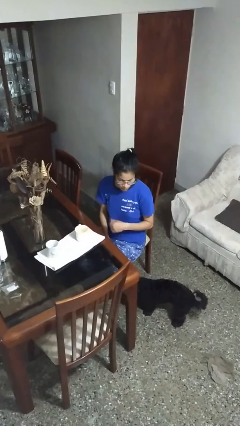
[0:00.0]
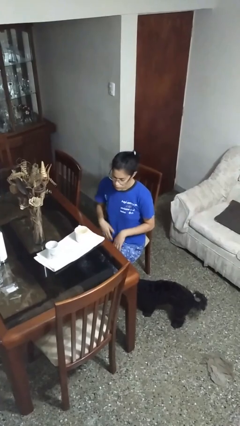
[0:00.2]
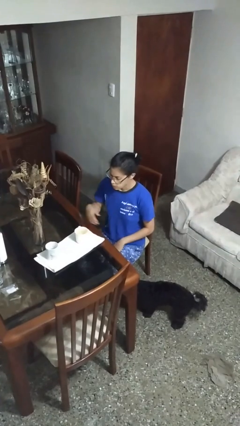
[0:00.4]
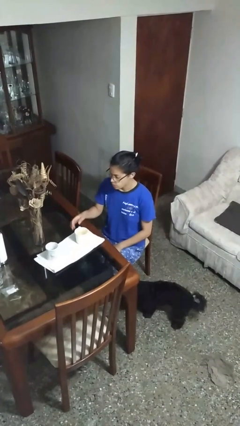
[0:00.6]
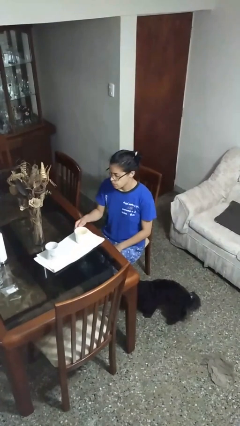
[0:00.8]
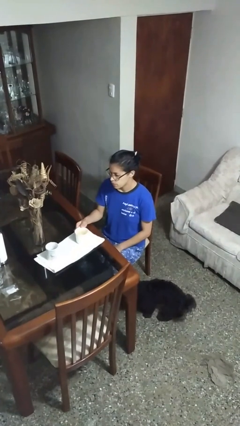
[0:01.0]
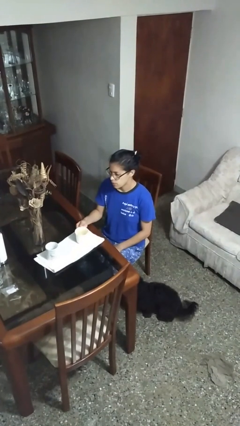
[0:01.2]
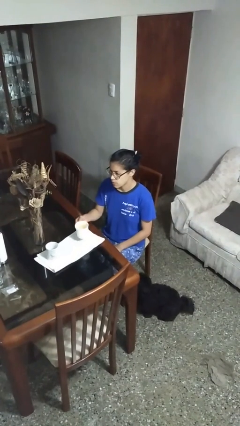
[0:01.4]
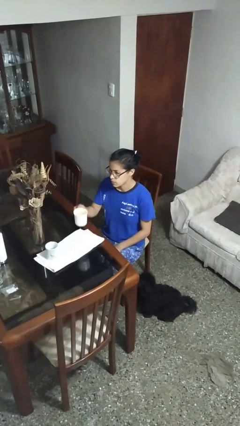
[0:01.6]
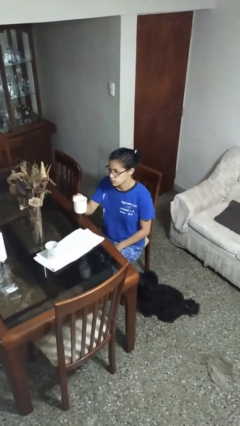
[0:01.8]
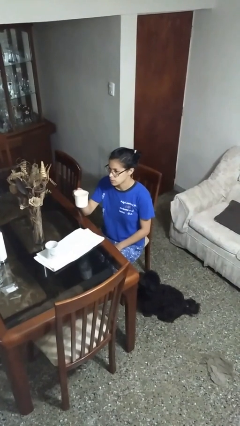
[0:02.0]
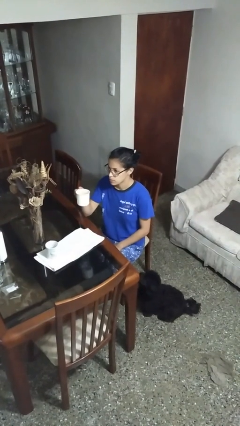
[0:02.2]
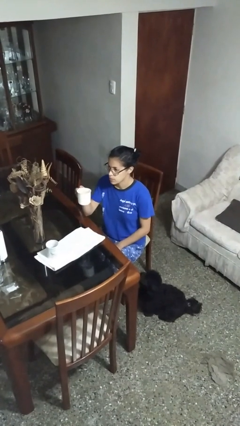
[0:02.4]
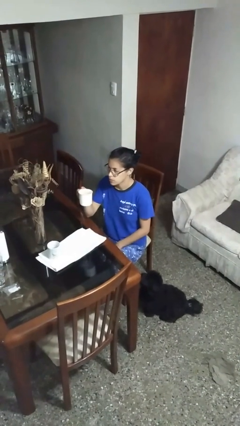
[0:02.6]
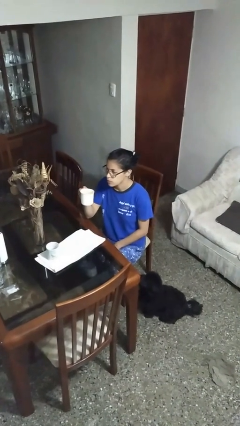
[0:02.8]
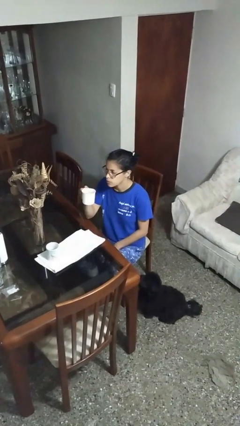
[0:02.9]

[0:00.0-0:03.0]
person picks up object from table

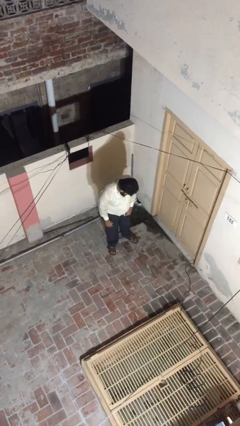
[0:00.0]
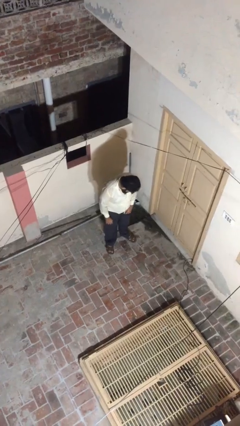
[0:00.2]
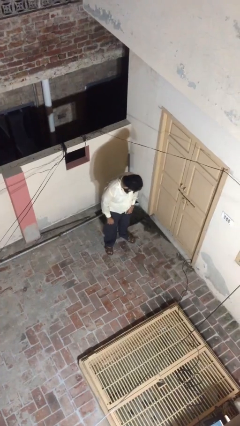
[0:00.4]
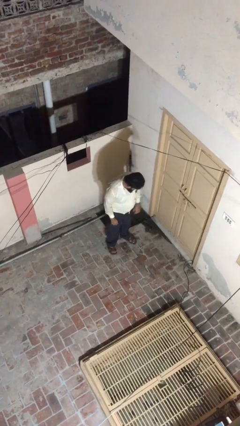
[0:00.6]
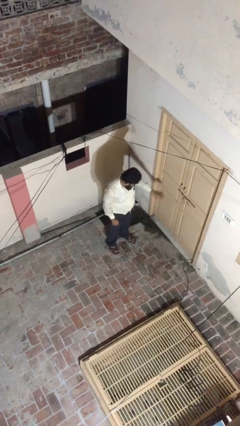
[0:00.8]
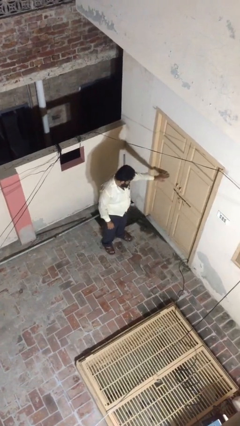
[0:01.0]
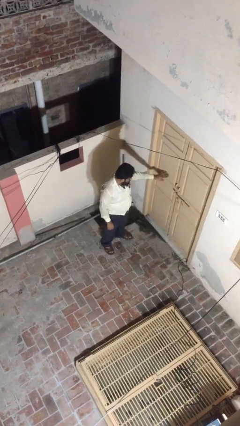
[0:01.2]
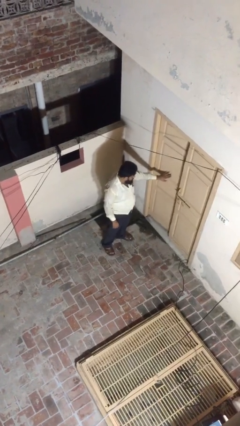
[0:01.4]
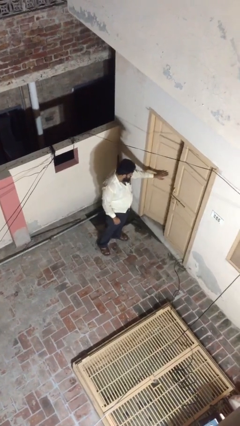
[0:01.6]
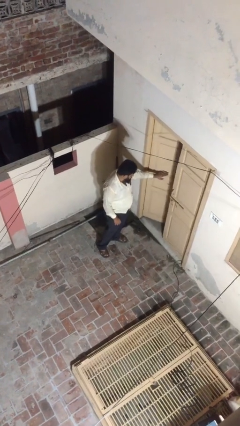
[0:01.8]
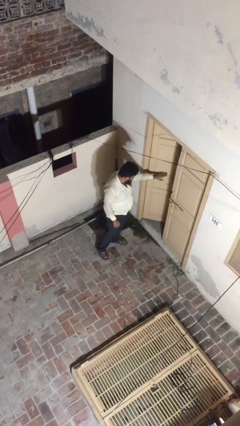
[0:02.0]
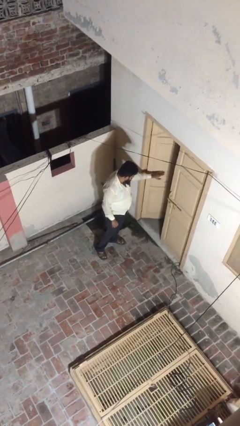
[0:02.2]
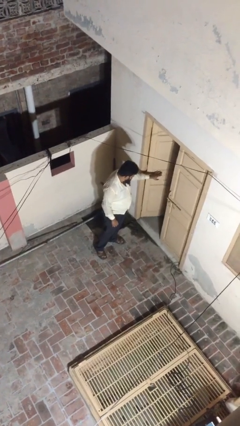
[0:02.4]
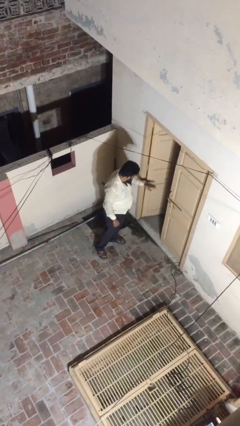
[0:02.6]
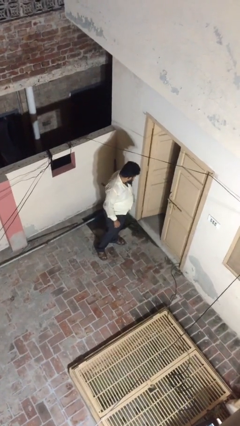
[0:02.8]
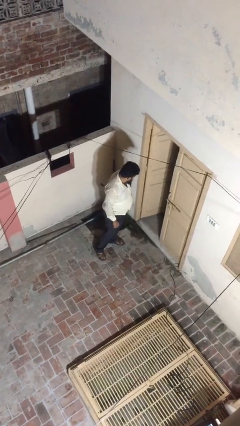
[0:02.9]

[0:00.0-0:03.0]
person opens facility door

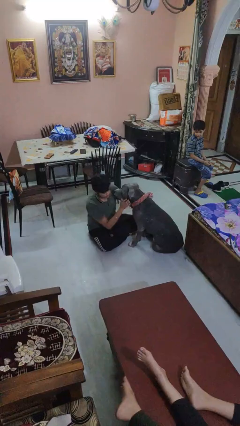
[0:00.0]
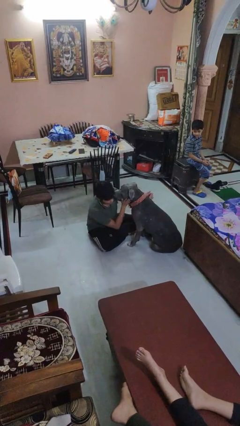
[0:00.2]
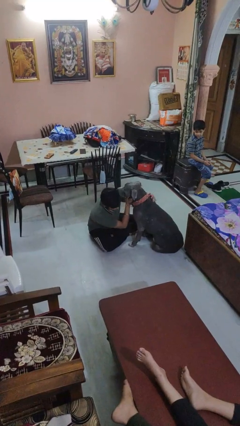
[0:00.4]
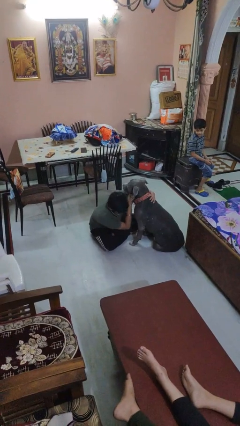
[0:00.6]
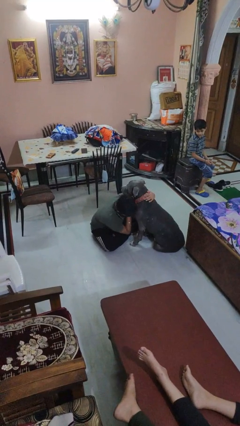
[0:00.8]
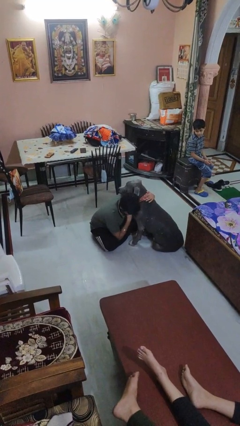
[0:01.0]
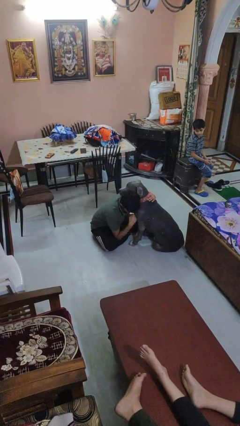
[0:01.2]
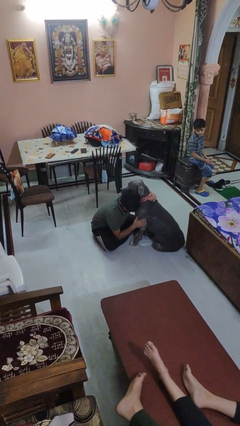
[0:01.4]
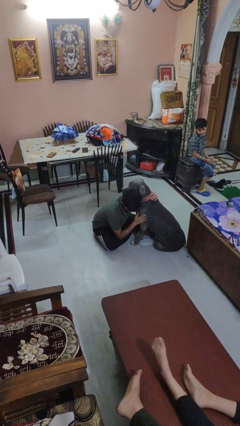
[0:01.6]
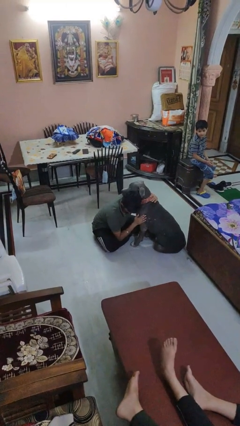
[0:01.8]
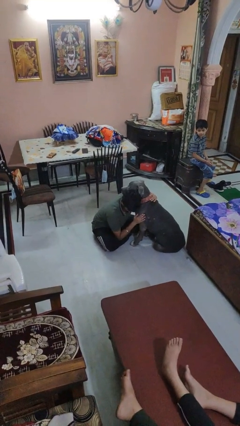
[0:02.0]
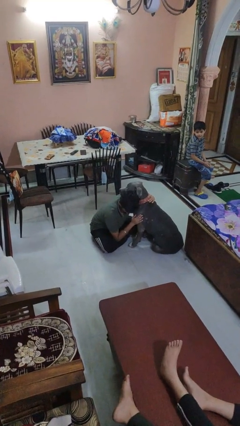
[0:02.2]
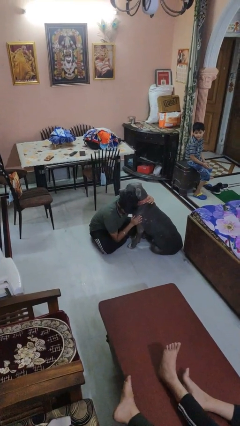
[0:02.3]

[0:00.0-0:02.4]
person hugs dog

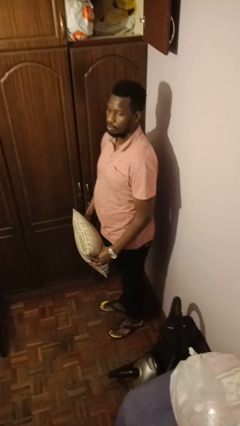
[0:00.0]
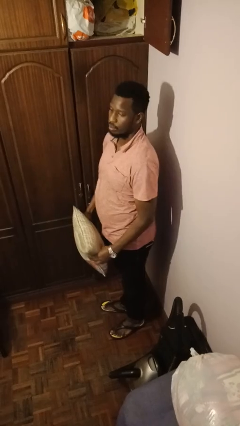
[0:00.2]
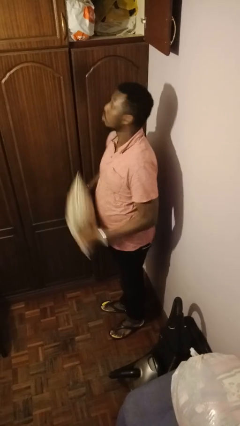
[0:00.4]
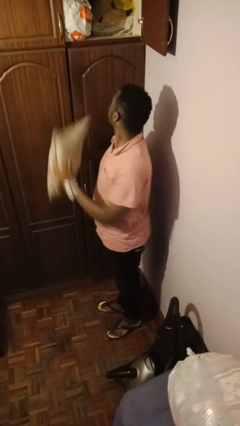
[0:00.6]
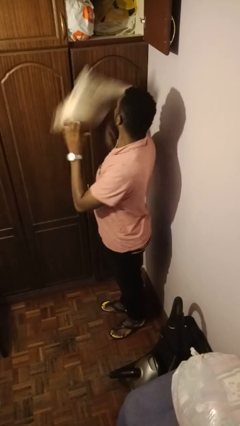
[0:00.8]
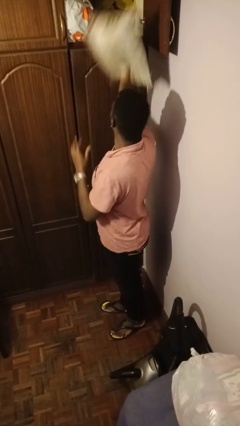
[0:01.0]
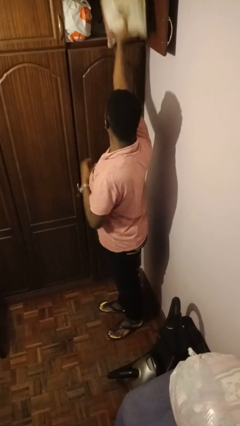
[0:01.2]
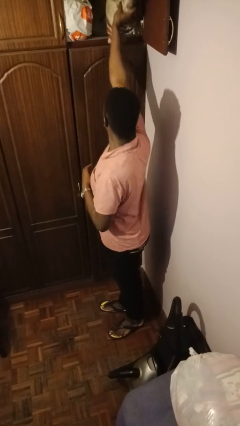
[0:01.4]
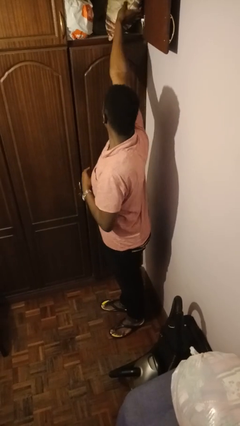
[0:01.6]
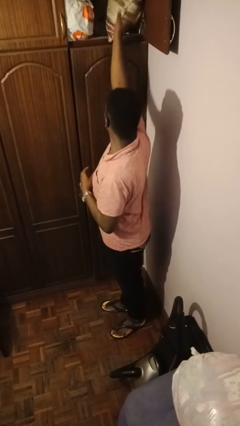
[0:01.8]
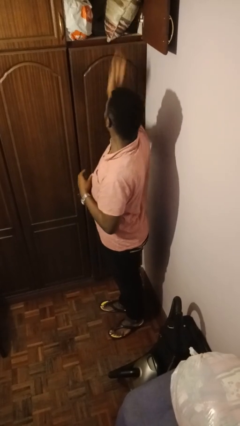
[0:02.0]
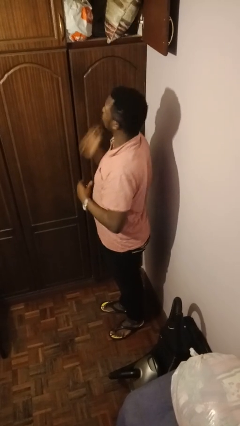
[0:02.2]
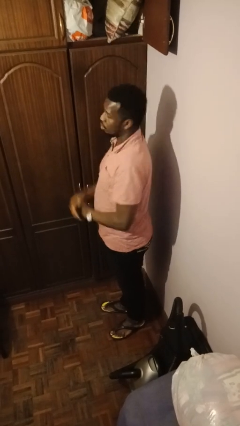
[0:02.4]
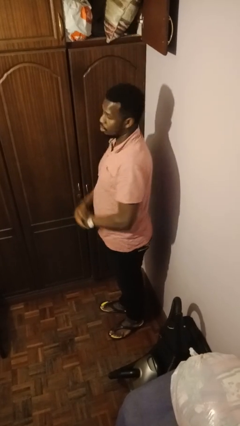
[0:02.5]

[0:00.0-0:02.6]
person puts down object on shelf

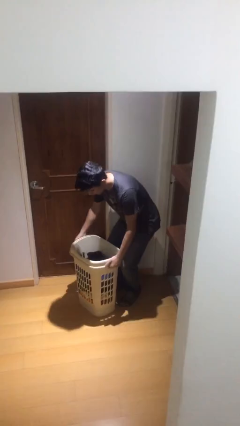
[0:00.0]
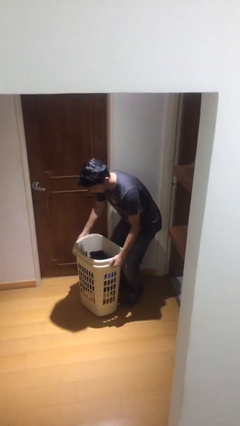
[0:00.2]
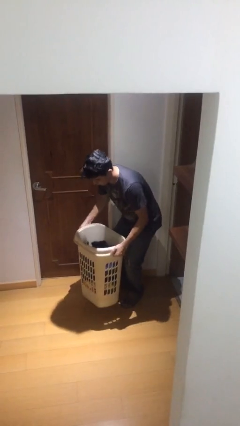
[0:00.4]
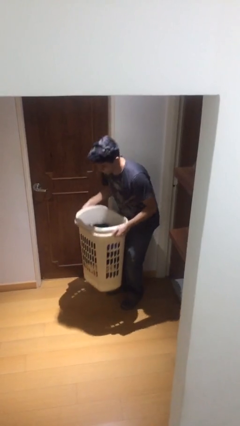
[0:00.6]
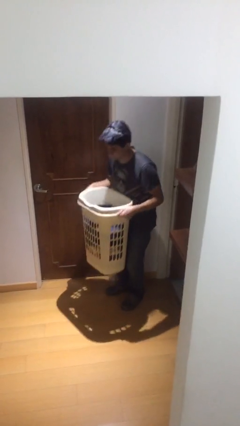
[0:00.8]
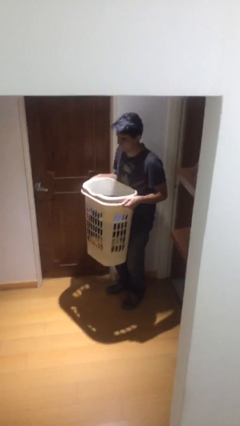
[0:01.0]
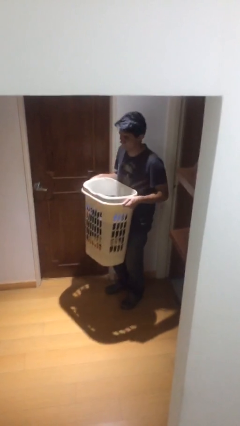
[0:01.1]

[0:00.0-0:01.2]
person picks up object from floor

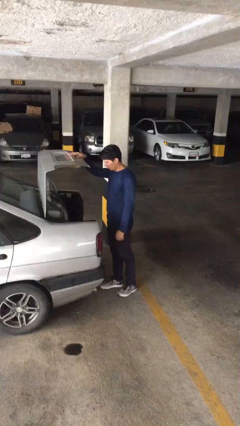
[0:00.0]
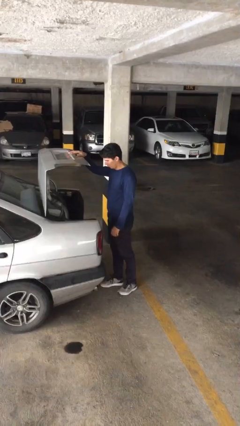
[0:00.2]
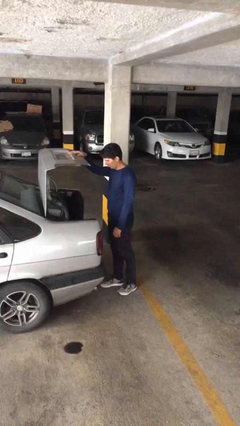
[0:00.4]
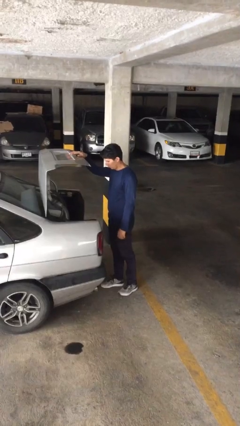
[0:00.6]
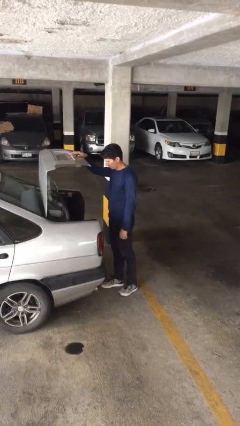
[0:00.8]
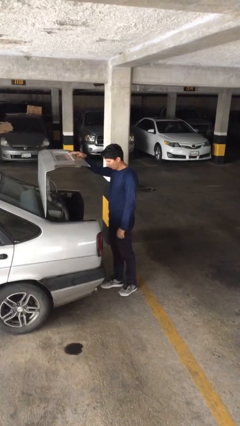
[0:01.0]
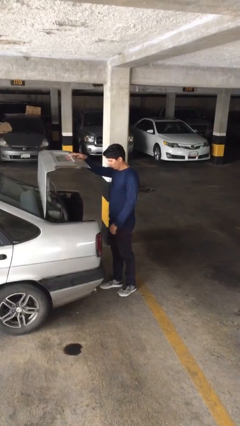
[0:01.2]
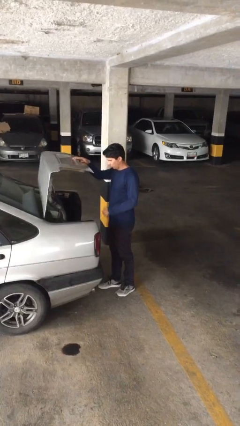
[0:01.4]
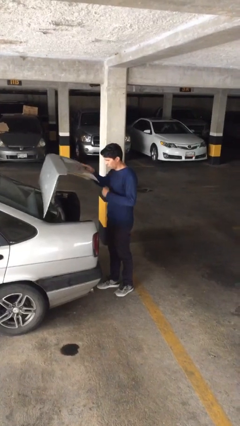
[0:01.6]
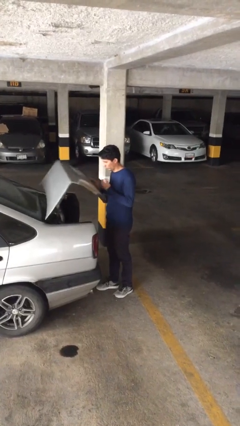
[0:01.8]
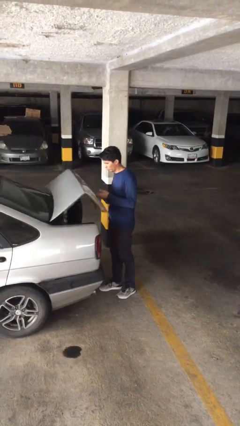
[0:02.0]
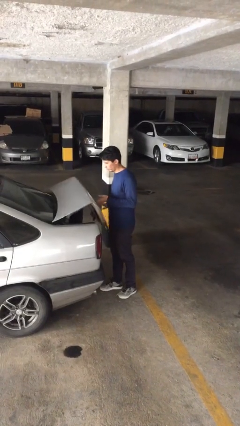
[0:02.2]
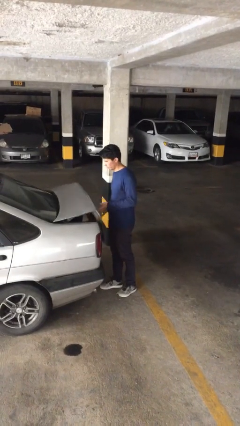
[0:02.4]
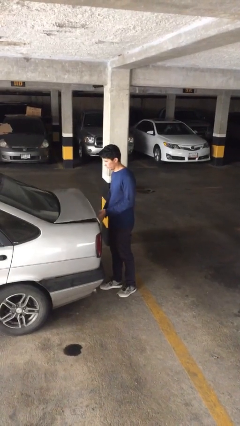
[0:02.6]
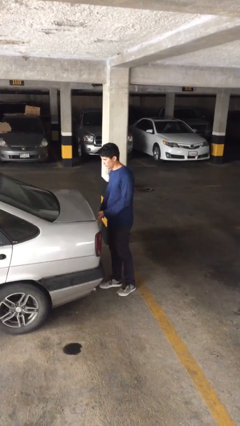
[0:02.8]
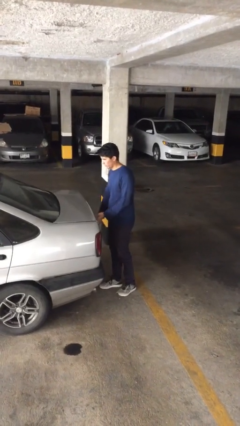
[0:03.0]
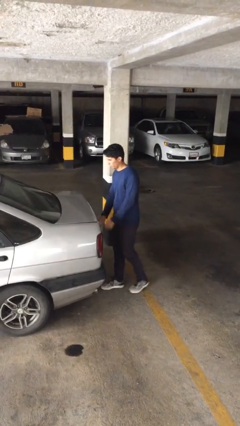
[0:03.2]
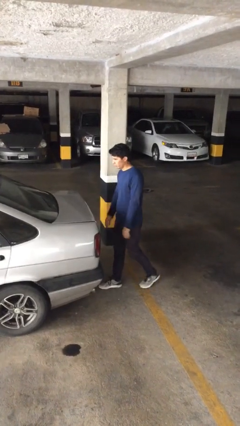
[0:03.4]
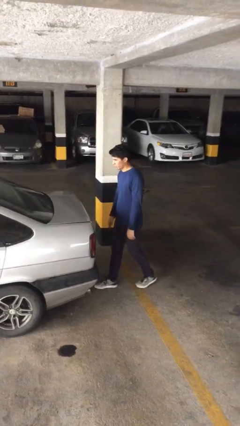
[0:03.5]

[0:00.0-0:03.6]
person closes car trunk

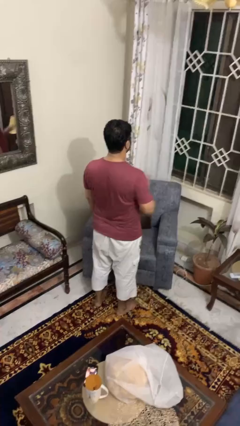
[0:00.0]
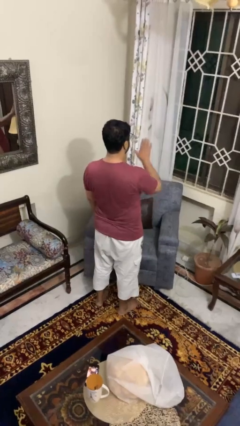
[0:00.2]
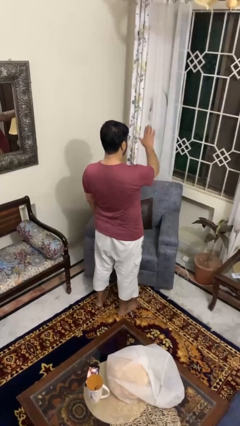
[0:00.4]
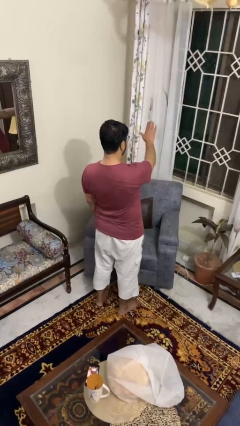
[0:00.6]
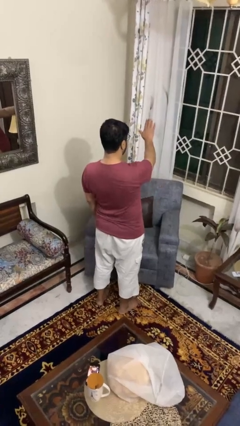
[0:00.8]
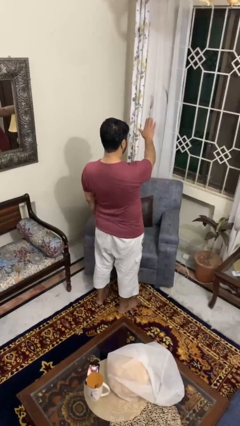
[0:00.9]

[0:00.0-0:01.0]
person gestures stop

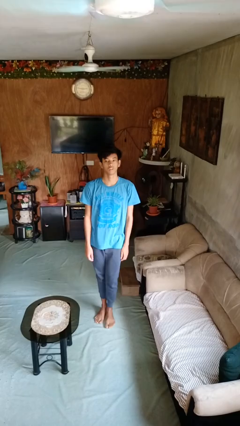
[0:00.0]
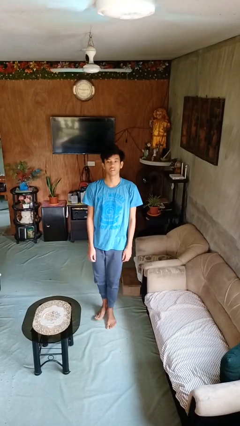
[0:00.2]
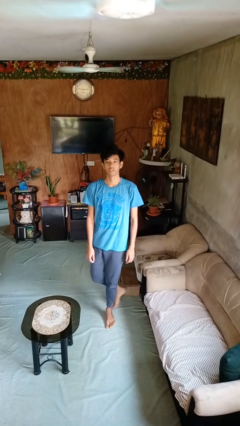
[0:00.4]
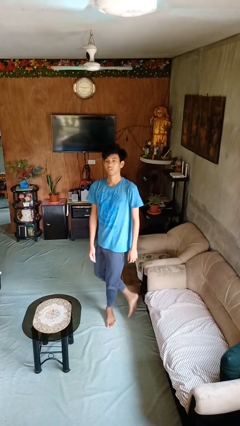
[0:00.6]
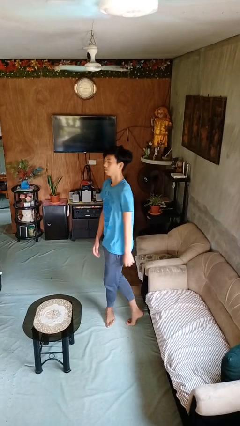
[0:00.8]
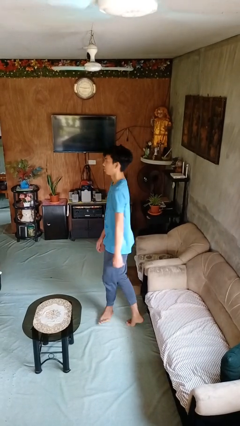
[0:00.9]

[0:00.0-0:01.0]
person twirls
